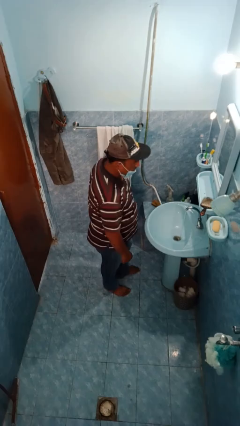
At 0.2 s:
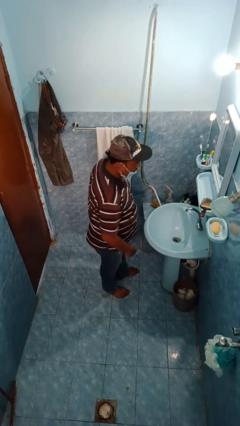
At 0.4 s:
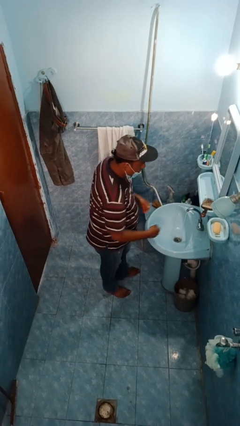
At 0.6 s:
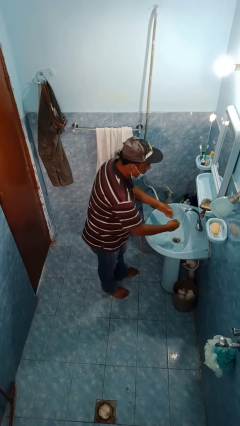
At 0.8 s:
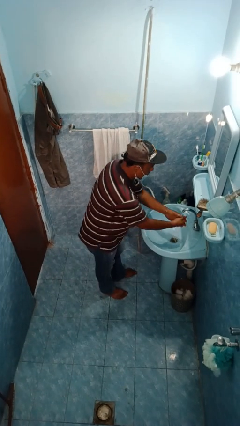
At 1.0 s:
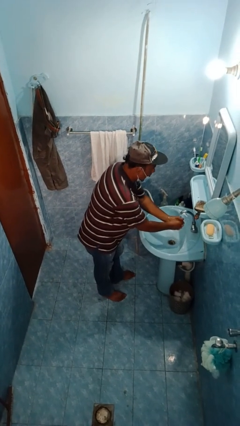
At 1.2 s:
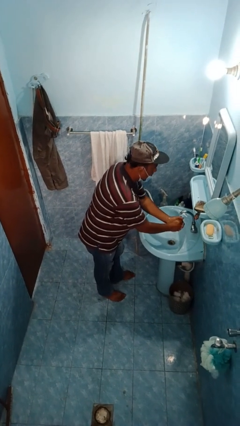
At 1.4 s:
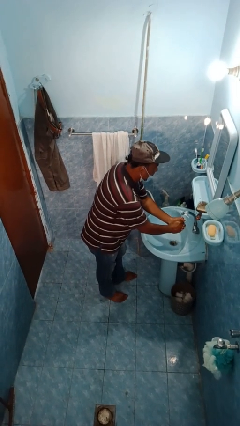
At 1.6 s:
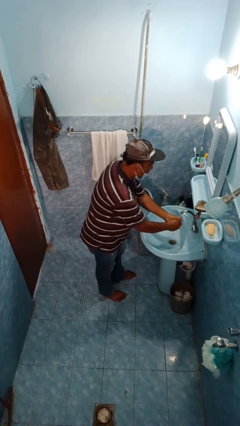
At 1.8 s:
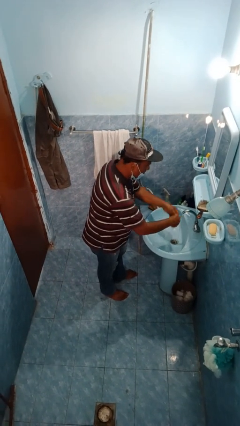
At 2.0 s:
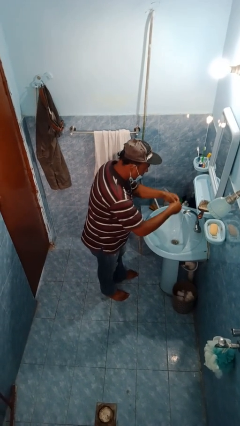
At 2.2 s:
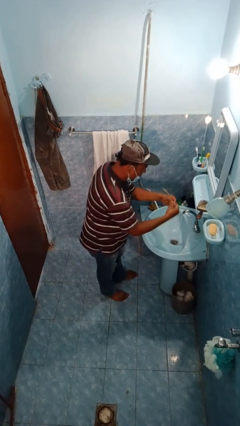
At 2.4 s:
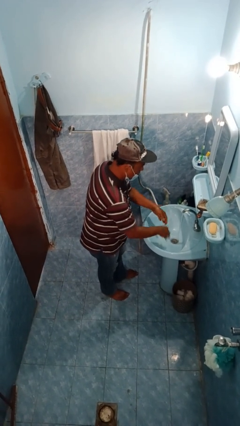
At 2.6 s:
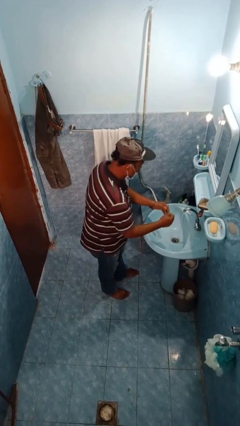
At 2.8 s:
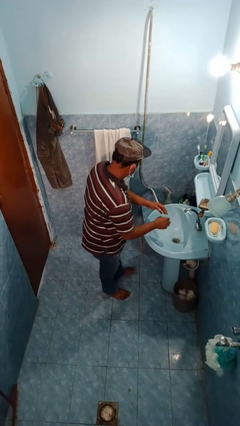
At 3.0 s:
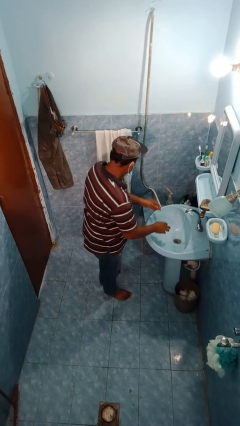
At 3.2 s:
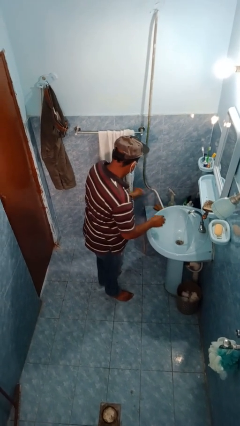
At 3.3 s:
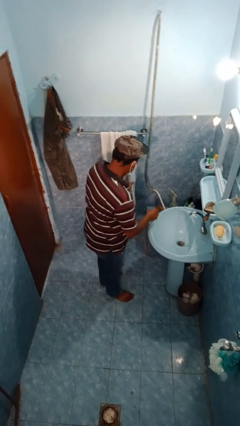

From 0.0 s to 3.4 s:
person washes hands

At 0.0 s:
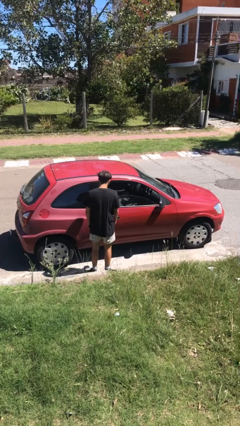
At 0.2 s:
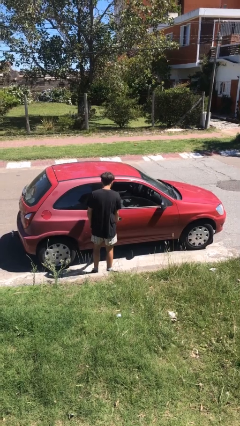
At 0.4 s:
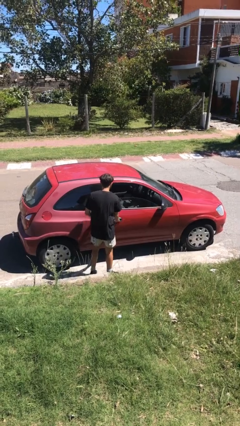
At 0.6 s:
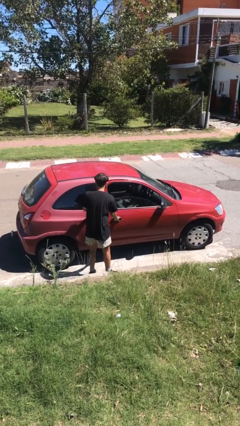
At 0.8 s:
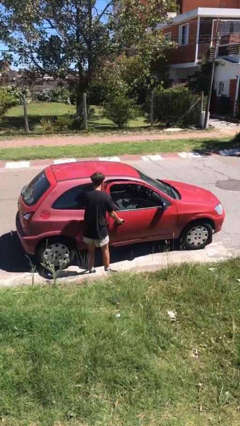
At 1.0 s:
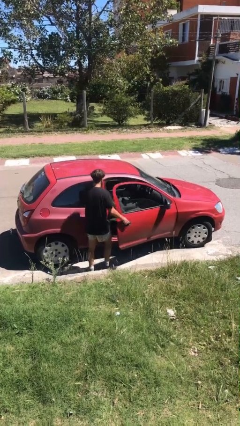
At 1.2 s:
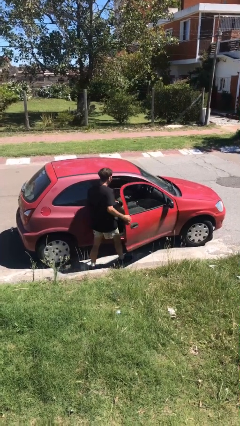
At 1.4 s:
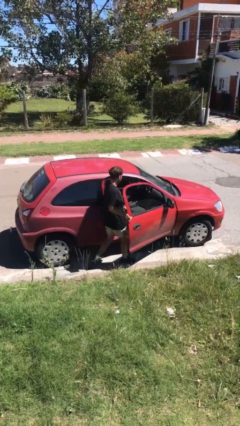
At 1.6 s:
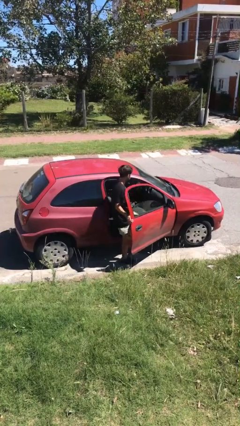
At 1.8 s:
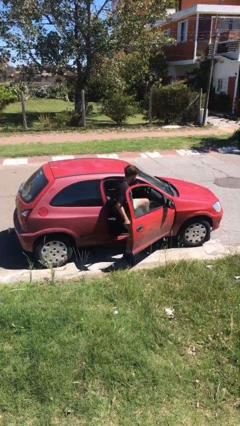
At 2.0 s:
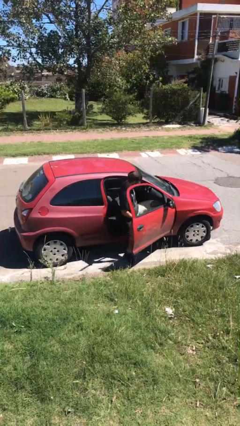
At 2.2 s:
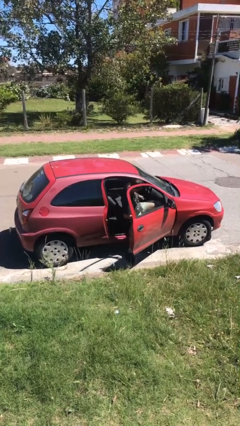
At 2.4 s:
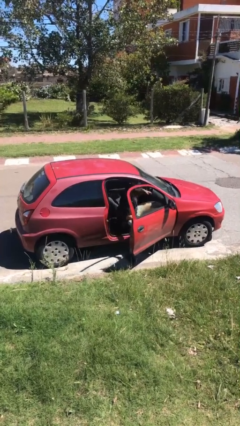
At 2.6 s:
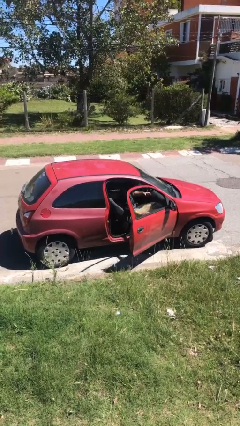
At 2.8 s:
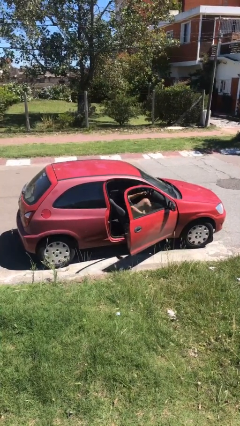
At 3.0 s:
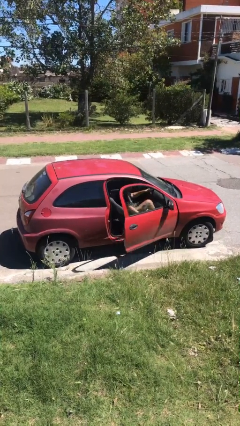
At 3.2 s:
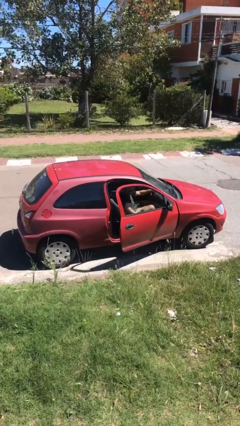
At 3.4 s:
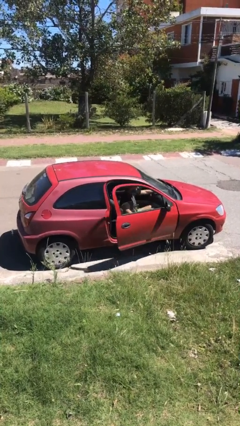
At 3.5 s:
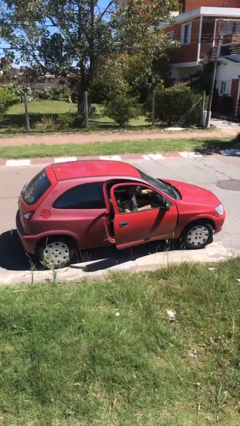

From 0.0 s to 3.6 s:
car picks up person

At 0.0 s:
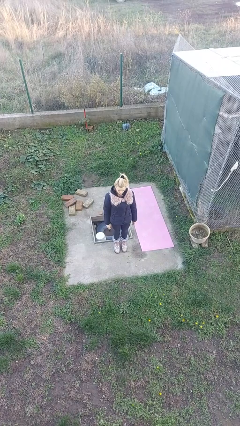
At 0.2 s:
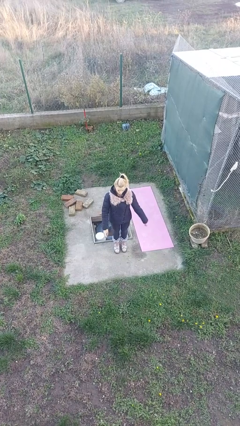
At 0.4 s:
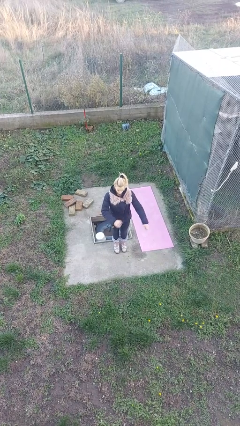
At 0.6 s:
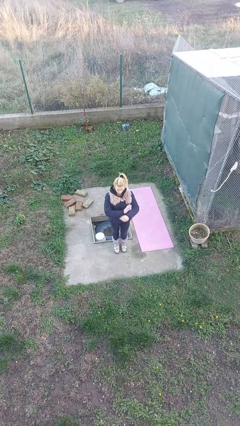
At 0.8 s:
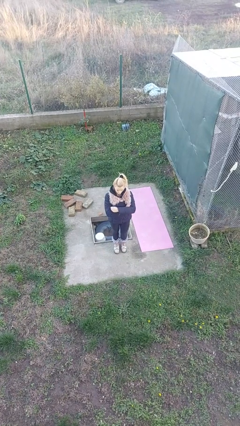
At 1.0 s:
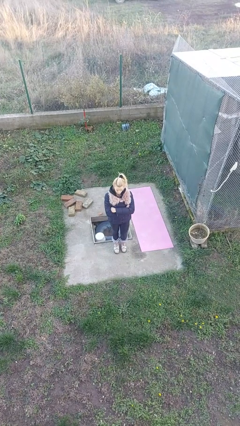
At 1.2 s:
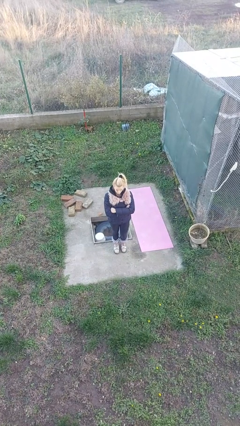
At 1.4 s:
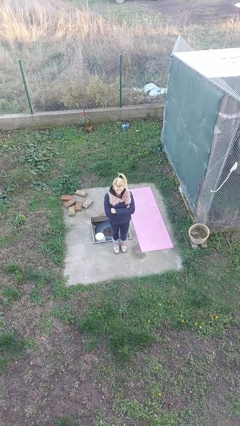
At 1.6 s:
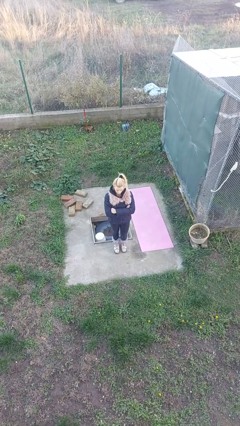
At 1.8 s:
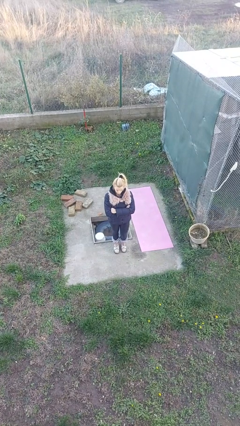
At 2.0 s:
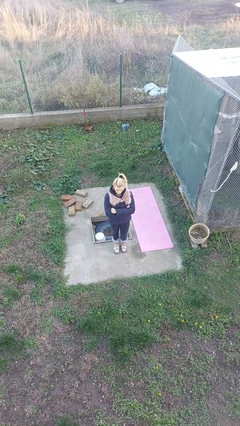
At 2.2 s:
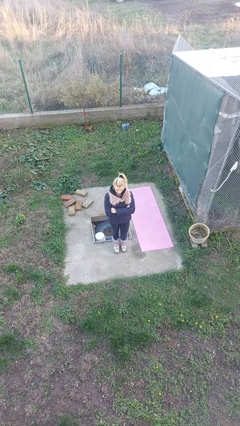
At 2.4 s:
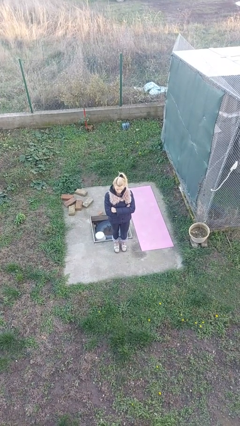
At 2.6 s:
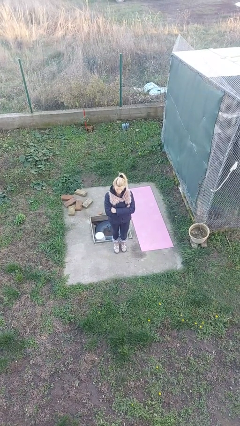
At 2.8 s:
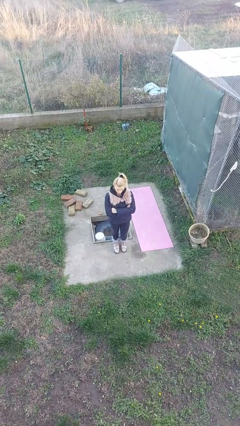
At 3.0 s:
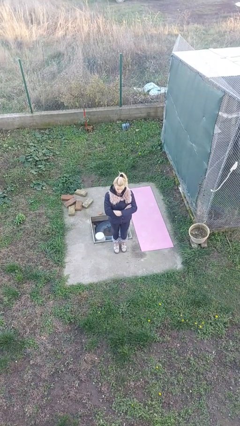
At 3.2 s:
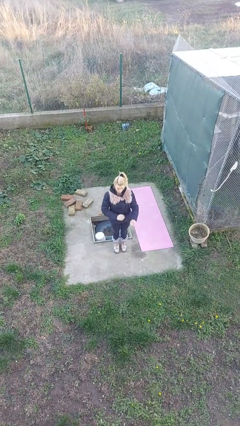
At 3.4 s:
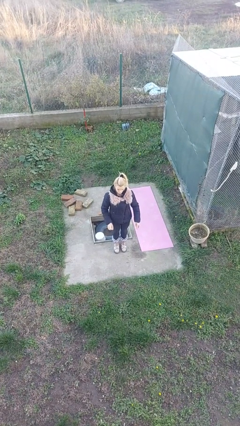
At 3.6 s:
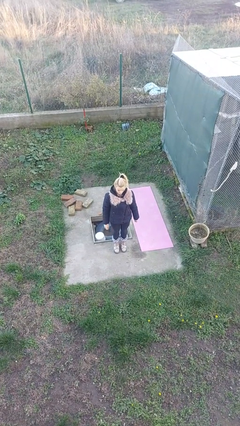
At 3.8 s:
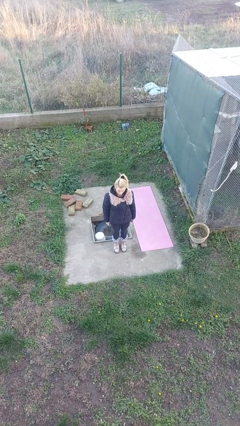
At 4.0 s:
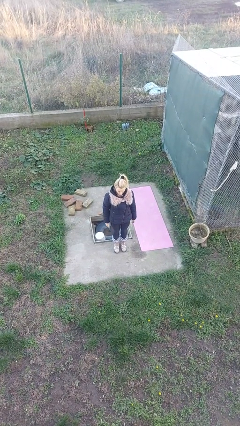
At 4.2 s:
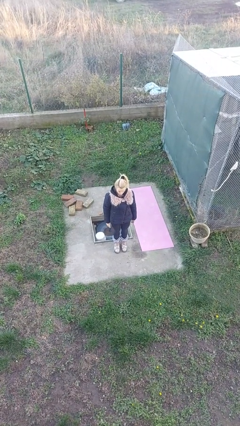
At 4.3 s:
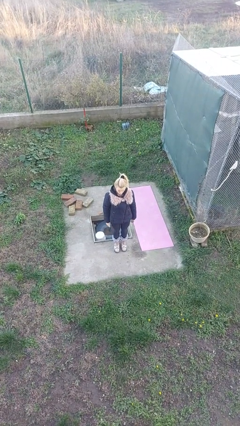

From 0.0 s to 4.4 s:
person crosses arms

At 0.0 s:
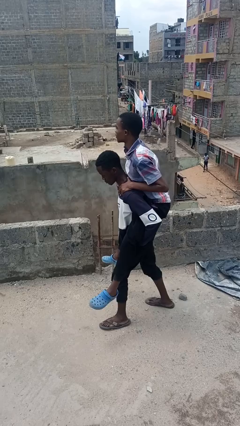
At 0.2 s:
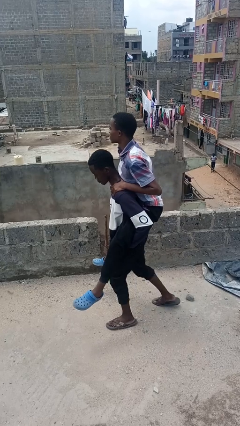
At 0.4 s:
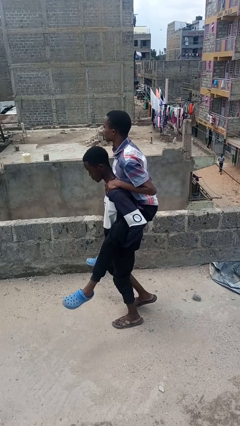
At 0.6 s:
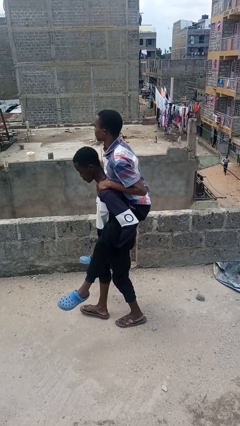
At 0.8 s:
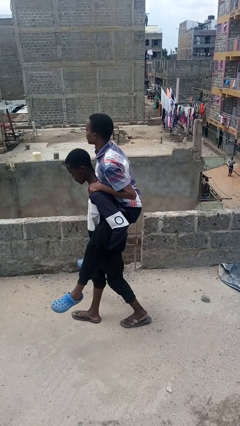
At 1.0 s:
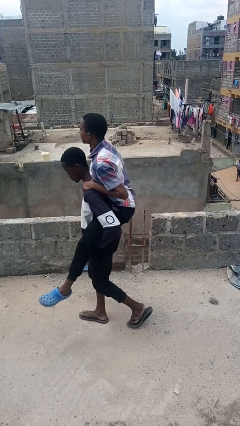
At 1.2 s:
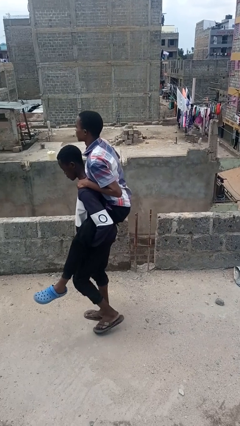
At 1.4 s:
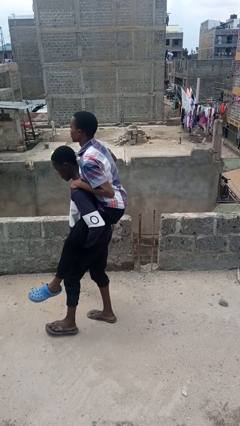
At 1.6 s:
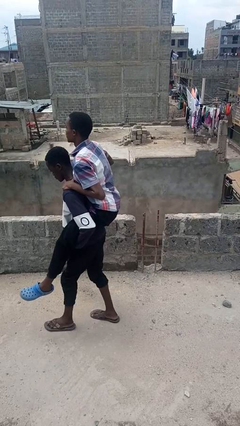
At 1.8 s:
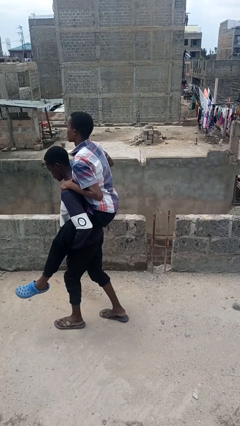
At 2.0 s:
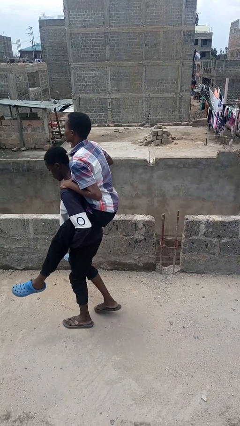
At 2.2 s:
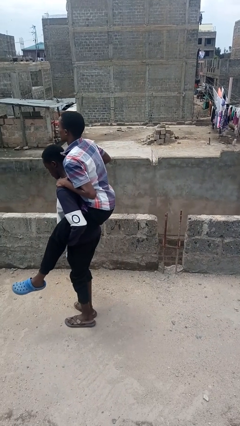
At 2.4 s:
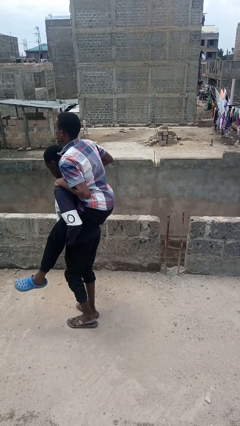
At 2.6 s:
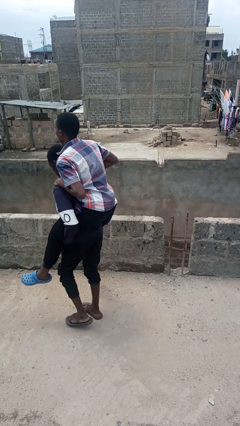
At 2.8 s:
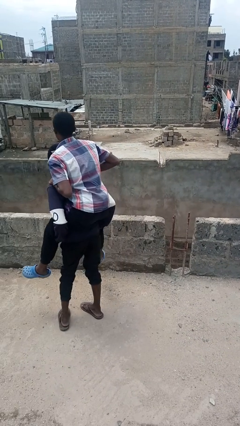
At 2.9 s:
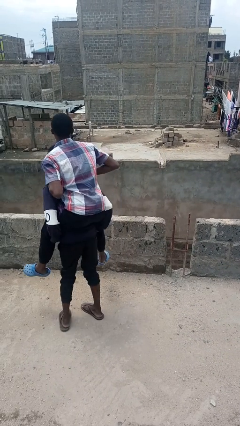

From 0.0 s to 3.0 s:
person carries person on back

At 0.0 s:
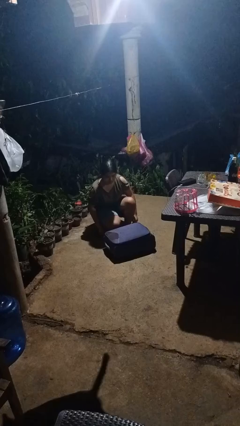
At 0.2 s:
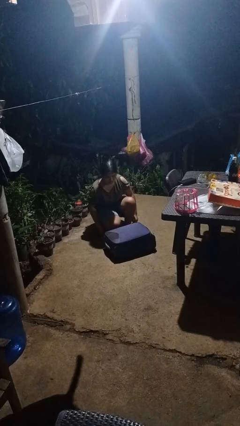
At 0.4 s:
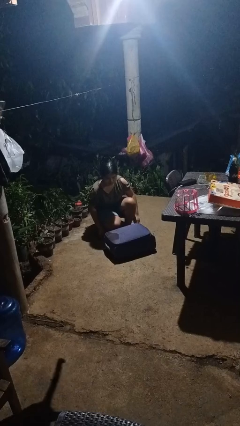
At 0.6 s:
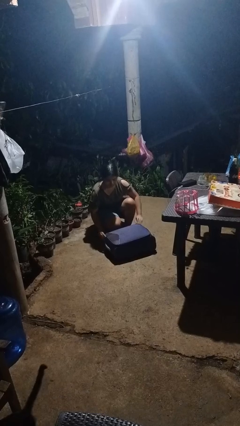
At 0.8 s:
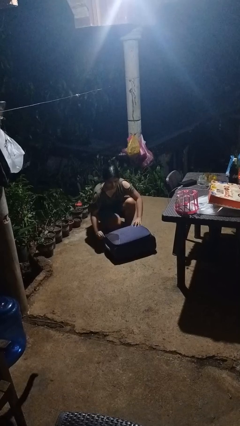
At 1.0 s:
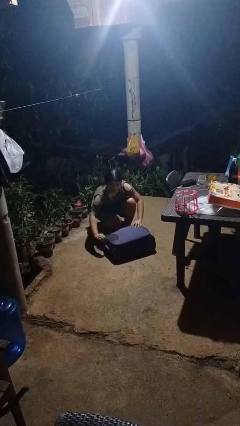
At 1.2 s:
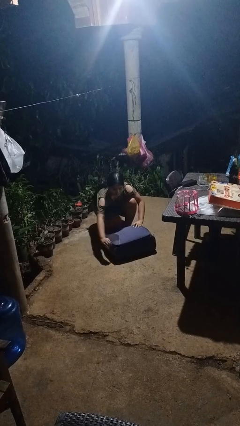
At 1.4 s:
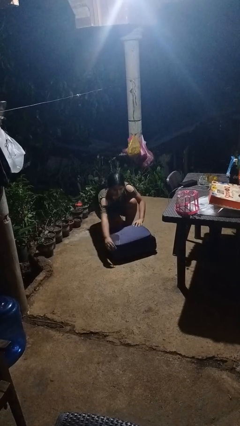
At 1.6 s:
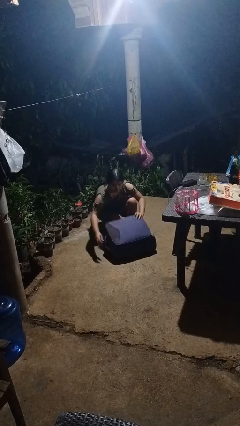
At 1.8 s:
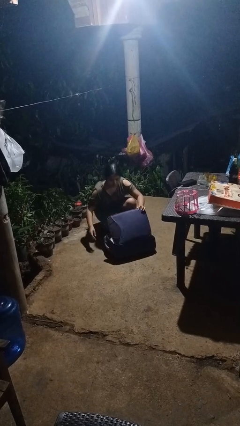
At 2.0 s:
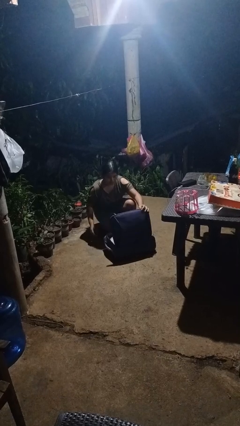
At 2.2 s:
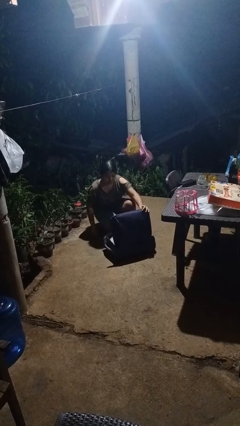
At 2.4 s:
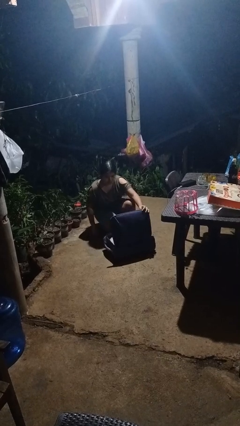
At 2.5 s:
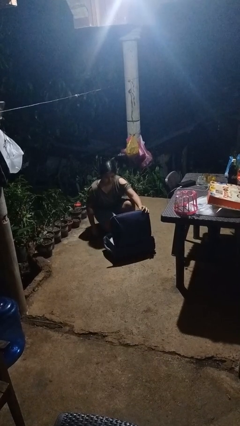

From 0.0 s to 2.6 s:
person opens suitcase
